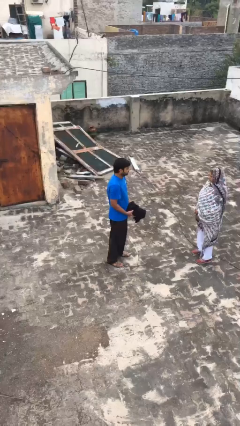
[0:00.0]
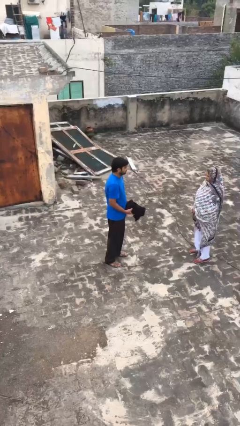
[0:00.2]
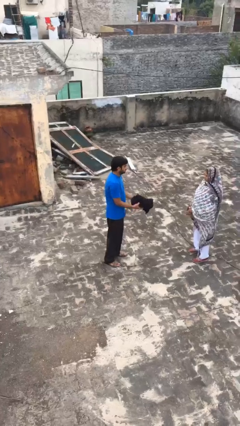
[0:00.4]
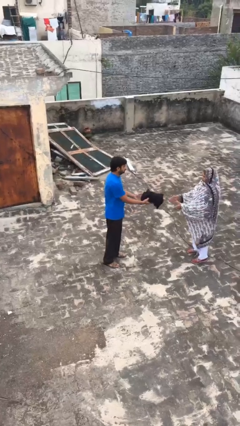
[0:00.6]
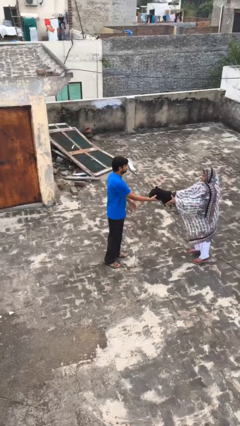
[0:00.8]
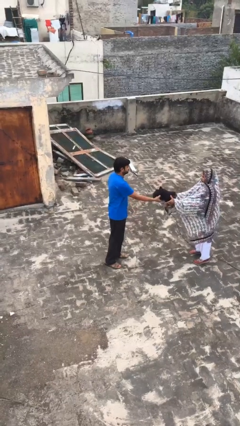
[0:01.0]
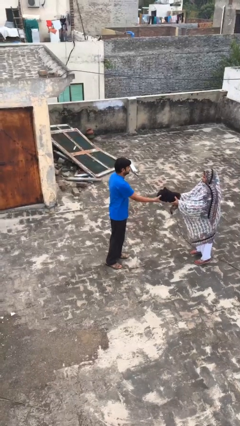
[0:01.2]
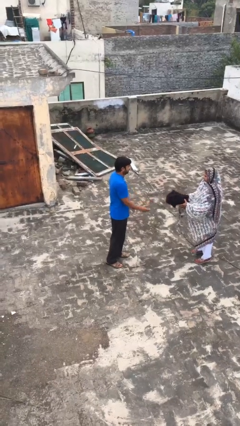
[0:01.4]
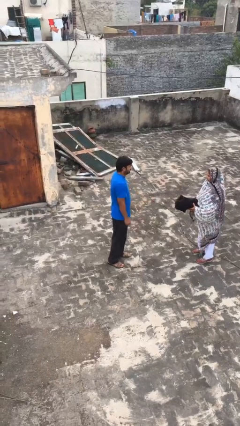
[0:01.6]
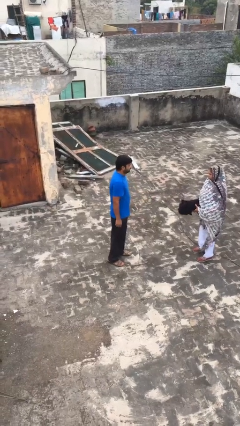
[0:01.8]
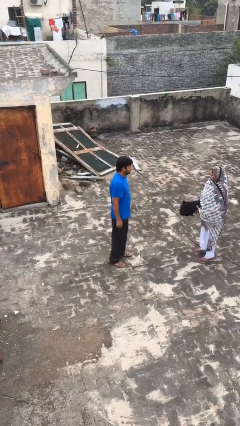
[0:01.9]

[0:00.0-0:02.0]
person transfers object to person

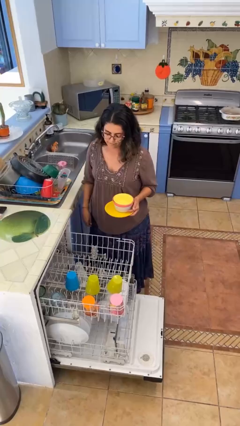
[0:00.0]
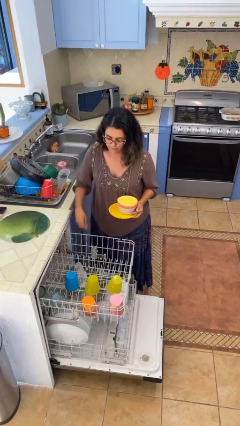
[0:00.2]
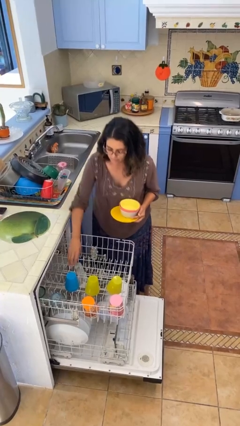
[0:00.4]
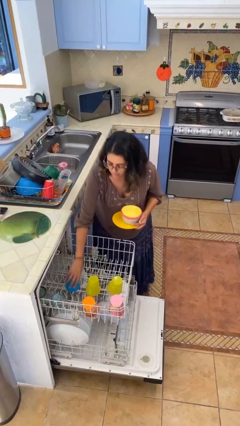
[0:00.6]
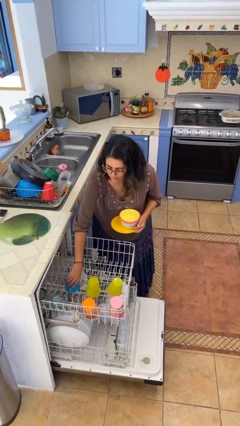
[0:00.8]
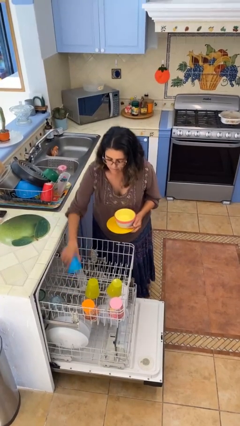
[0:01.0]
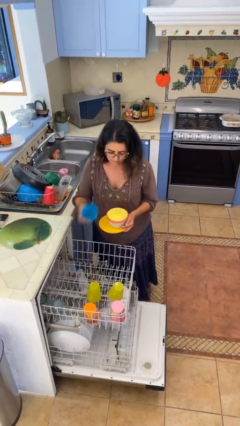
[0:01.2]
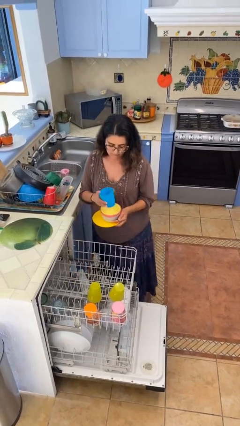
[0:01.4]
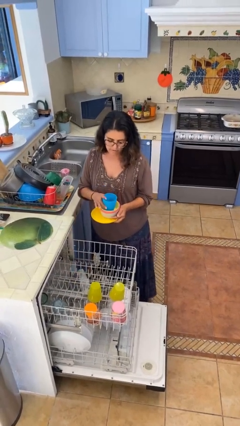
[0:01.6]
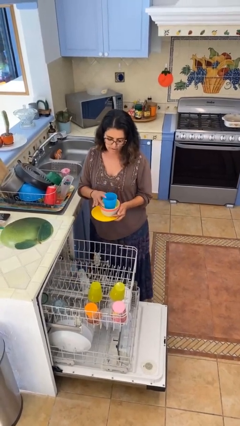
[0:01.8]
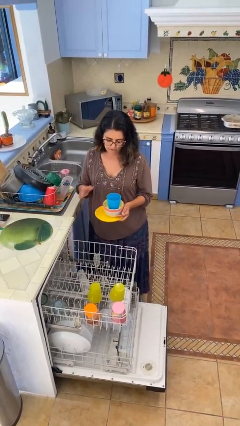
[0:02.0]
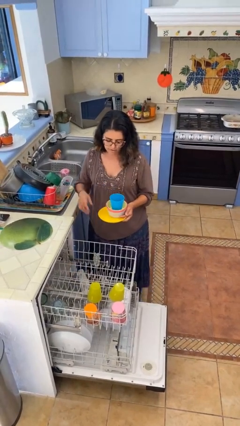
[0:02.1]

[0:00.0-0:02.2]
person unloads dishwasher

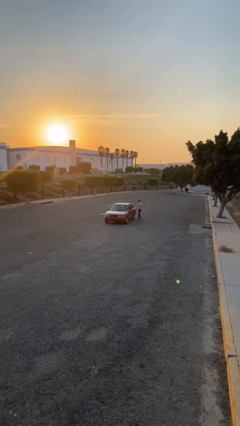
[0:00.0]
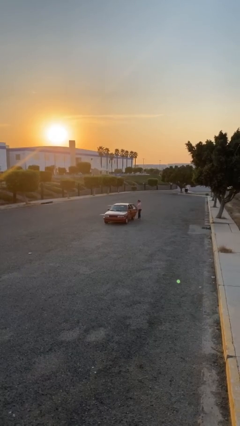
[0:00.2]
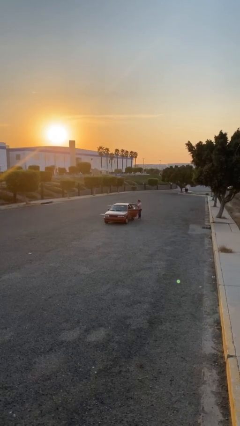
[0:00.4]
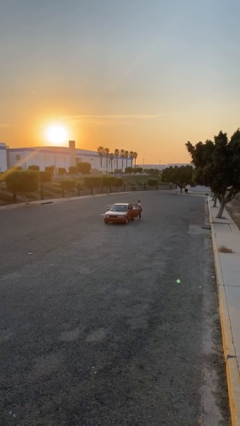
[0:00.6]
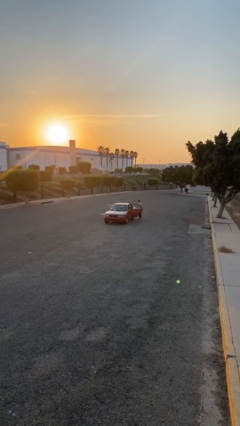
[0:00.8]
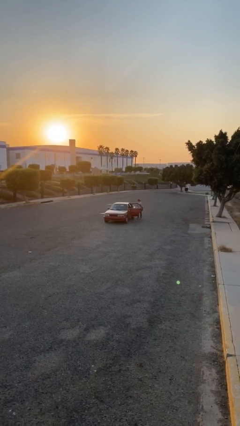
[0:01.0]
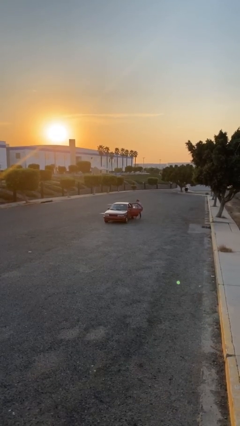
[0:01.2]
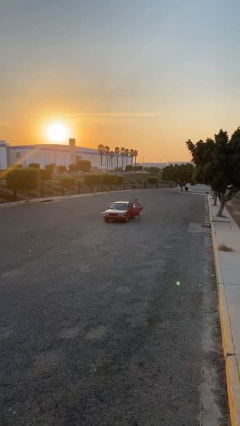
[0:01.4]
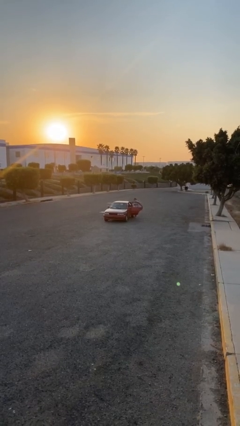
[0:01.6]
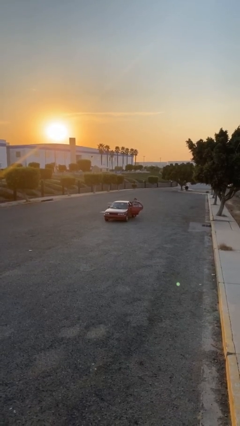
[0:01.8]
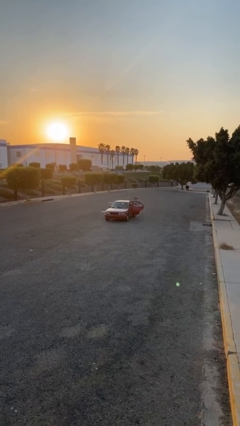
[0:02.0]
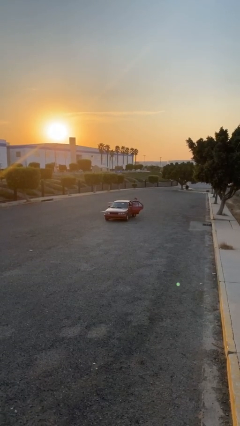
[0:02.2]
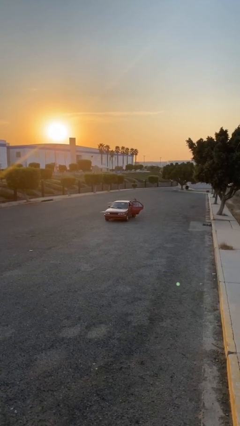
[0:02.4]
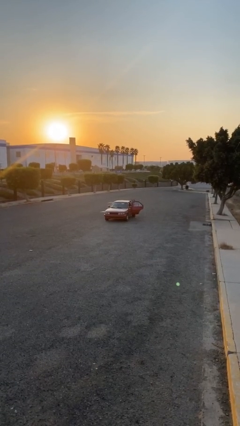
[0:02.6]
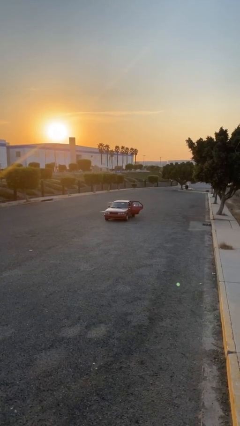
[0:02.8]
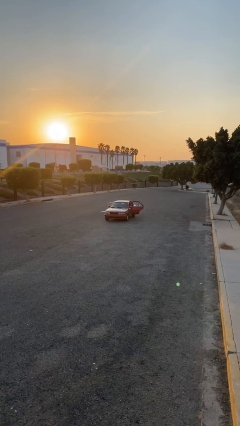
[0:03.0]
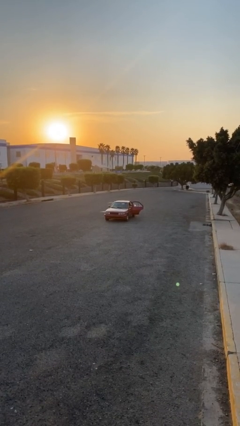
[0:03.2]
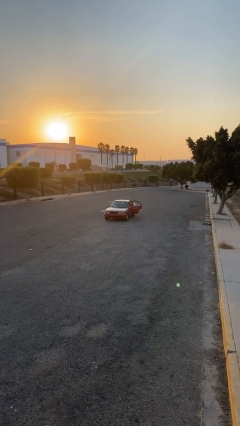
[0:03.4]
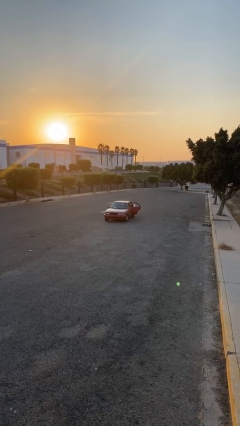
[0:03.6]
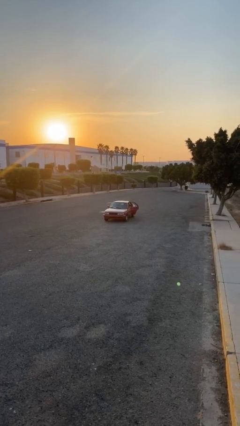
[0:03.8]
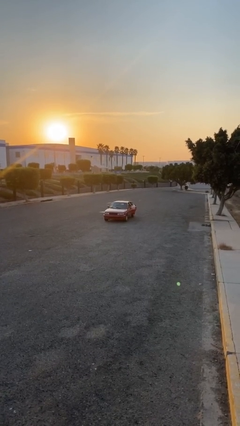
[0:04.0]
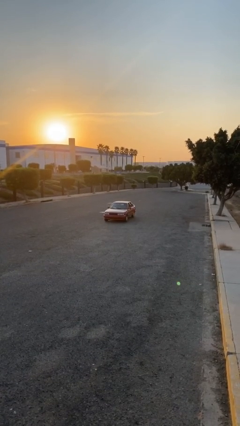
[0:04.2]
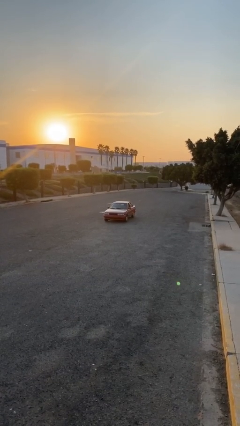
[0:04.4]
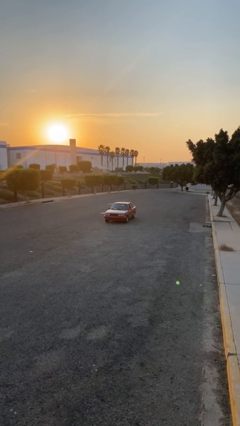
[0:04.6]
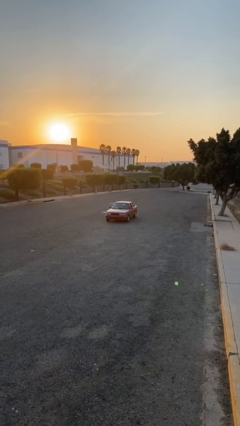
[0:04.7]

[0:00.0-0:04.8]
car picks up person

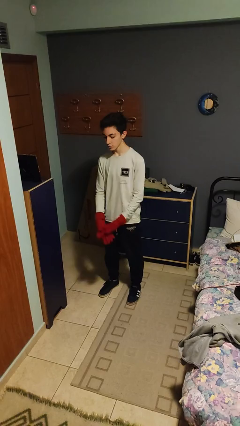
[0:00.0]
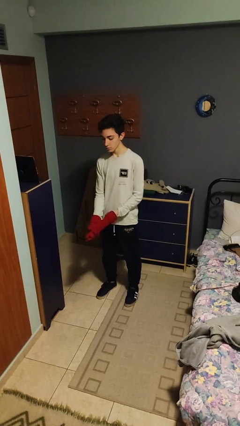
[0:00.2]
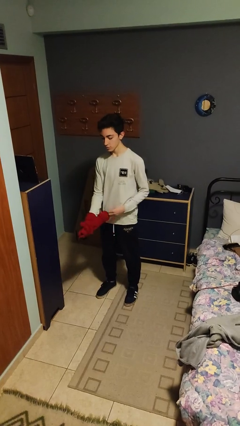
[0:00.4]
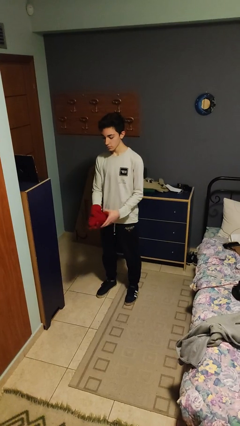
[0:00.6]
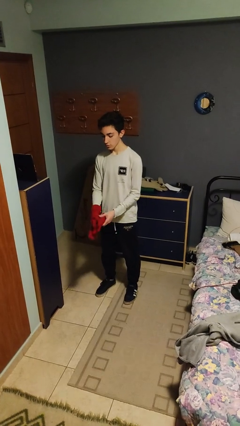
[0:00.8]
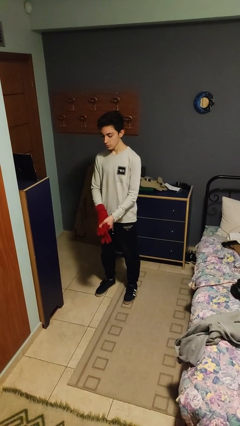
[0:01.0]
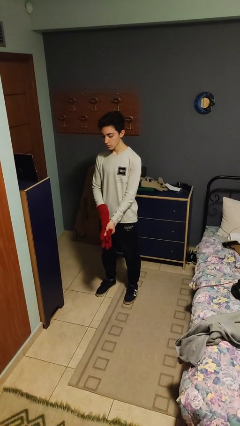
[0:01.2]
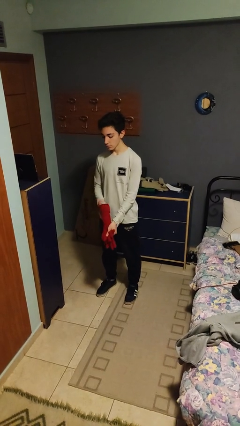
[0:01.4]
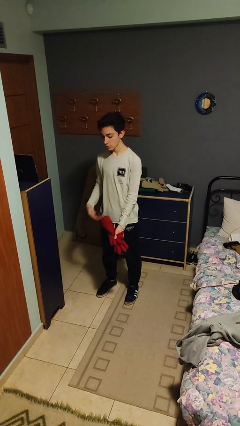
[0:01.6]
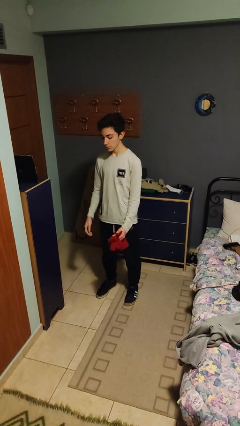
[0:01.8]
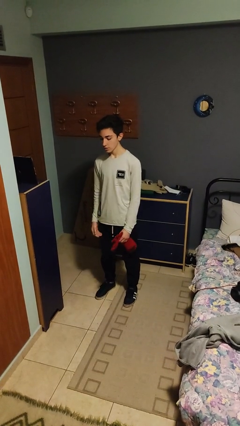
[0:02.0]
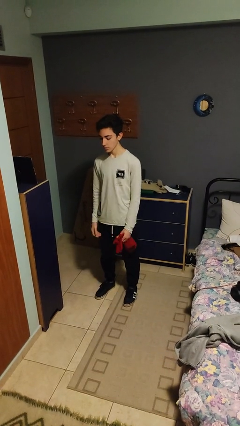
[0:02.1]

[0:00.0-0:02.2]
person takes off gloves

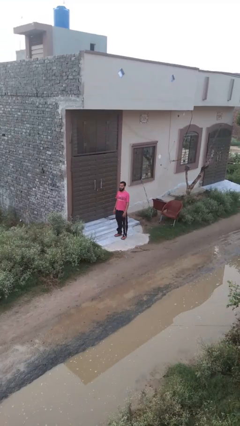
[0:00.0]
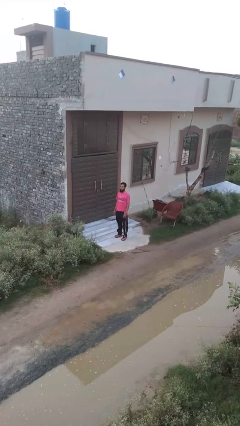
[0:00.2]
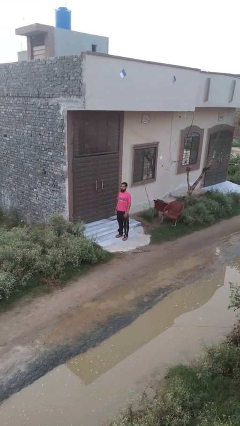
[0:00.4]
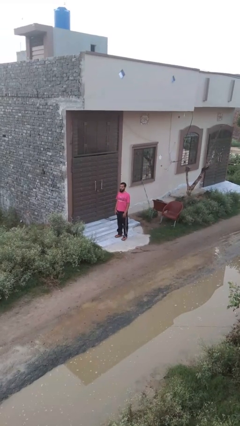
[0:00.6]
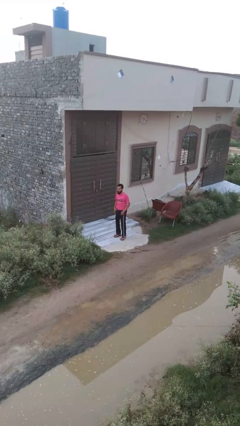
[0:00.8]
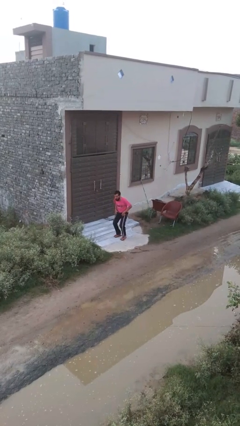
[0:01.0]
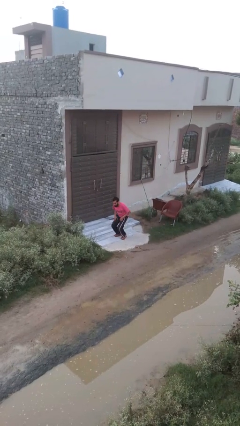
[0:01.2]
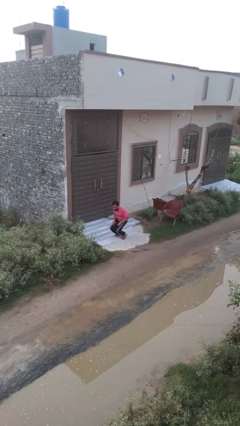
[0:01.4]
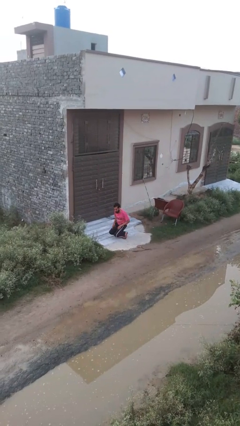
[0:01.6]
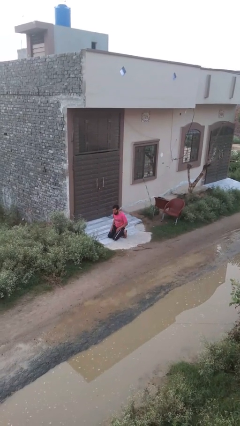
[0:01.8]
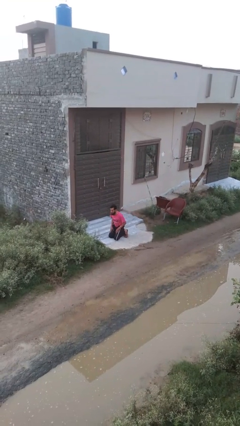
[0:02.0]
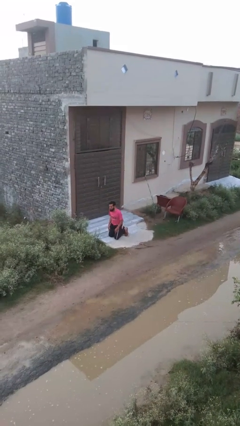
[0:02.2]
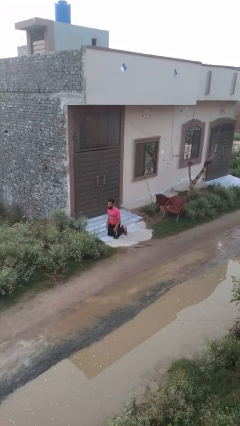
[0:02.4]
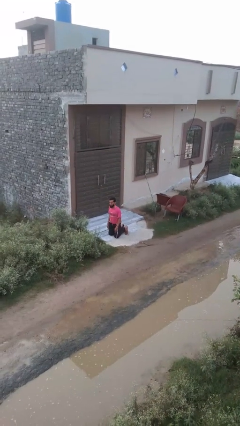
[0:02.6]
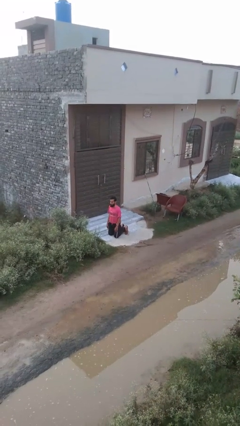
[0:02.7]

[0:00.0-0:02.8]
person kneels

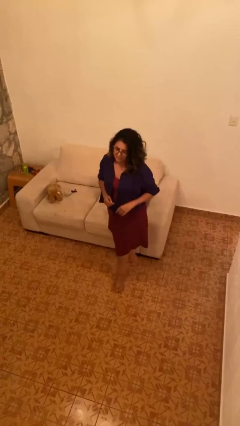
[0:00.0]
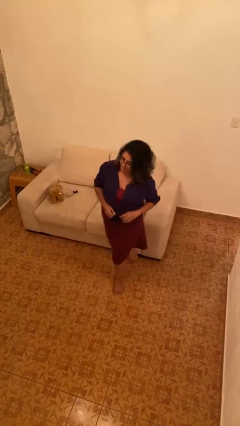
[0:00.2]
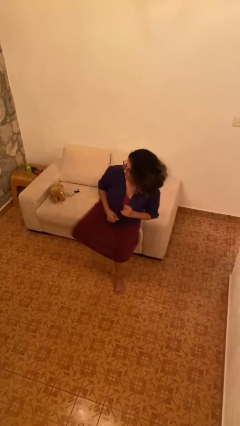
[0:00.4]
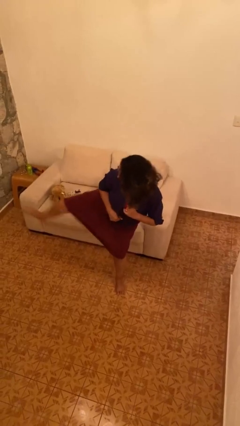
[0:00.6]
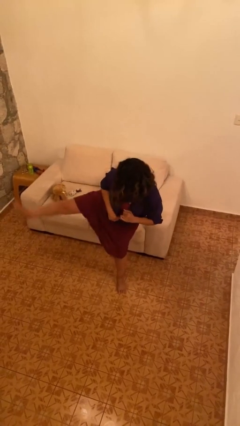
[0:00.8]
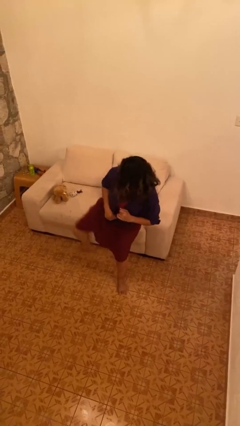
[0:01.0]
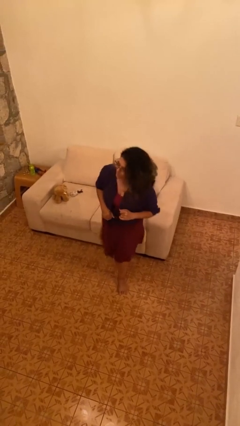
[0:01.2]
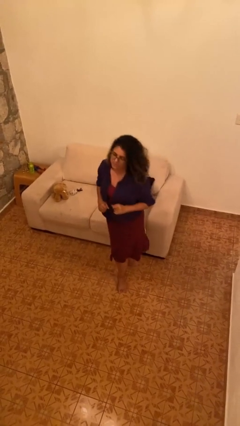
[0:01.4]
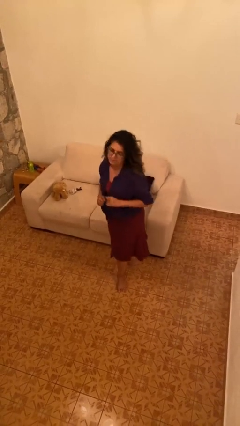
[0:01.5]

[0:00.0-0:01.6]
person karate kicks

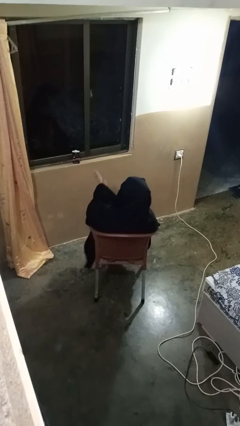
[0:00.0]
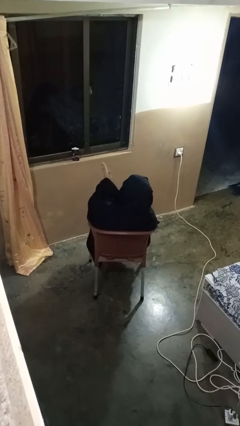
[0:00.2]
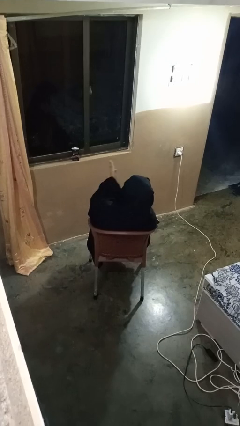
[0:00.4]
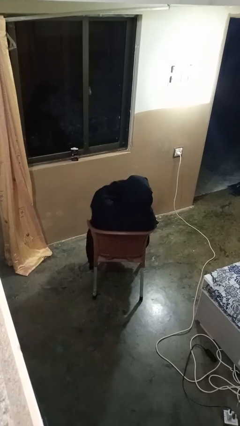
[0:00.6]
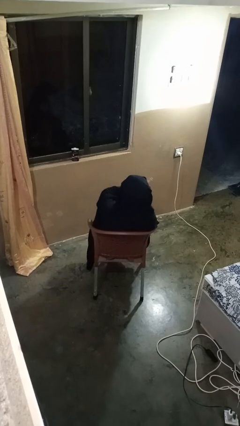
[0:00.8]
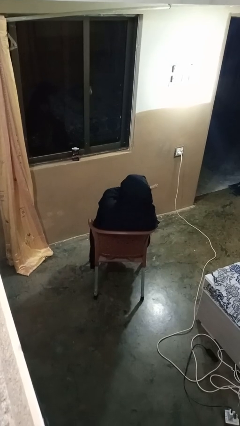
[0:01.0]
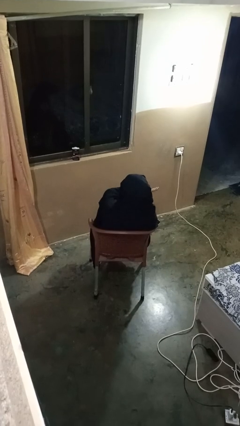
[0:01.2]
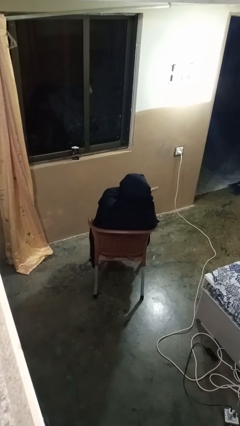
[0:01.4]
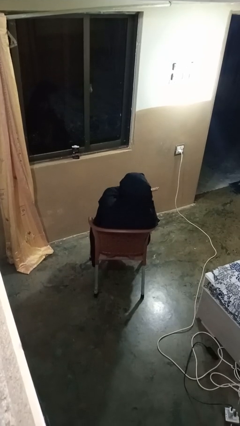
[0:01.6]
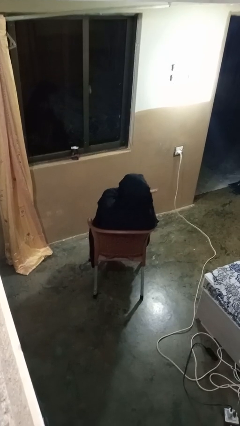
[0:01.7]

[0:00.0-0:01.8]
person gestures swipe right
